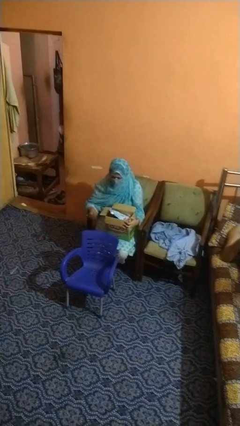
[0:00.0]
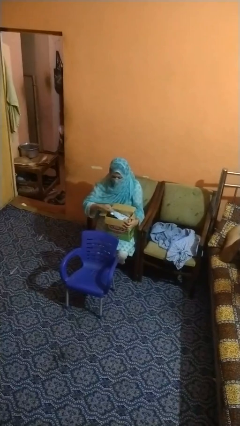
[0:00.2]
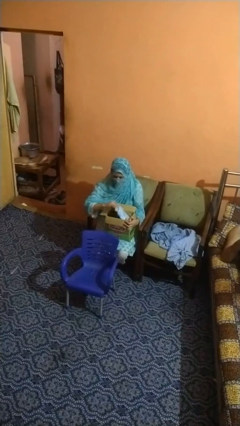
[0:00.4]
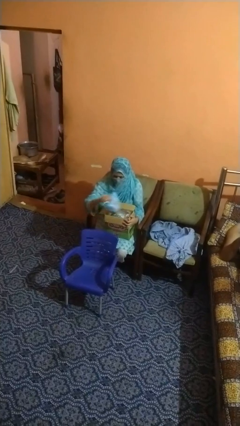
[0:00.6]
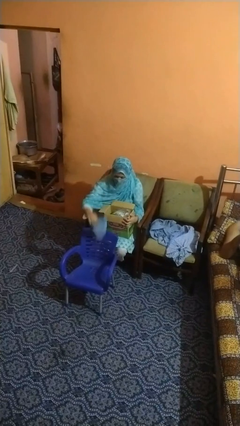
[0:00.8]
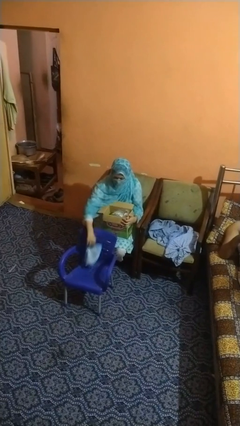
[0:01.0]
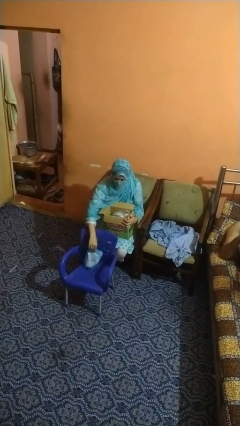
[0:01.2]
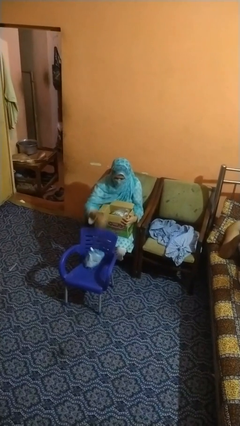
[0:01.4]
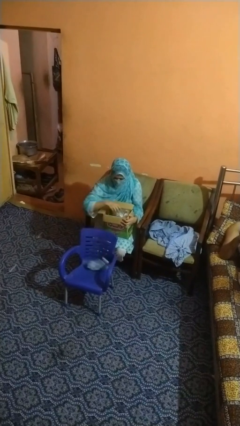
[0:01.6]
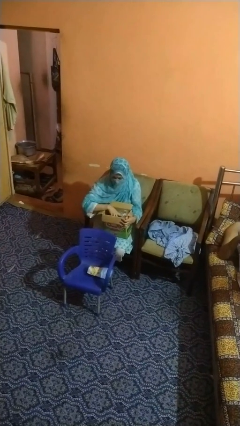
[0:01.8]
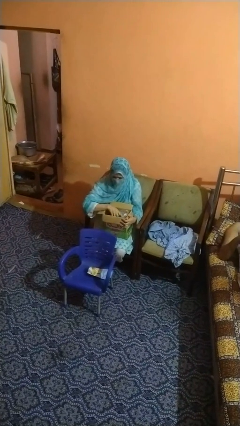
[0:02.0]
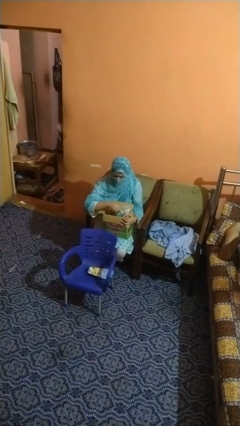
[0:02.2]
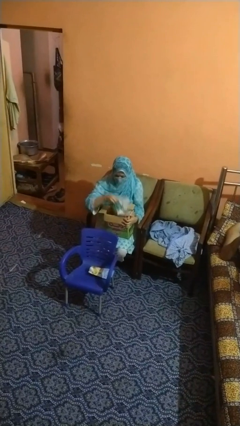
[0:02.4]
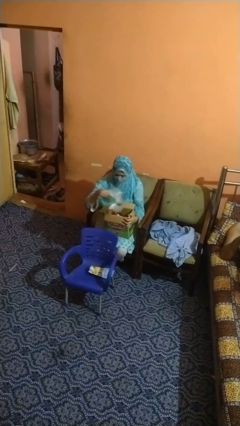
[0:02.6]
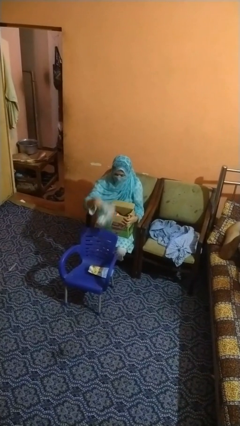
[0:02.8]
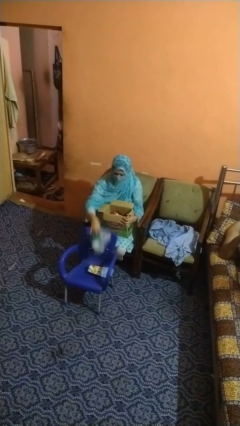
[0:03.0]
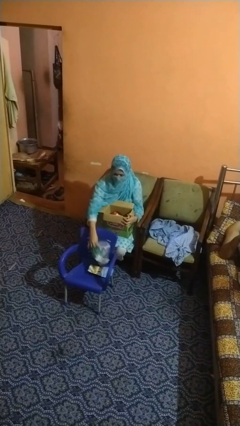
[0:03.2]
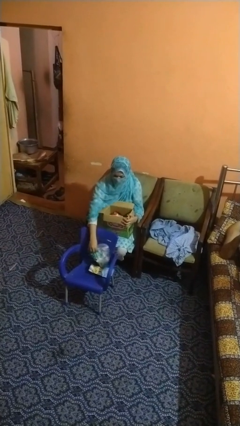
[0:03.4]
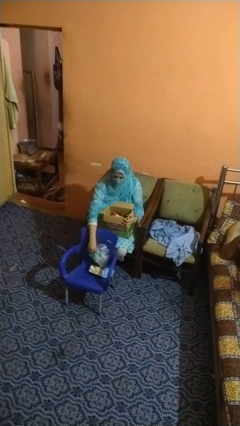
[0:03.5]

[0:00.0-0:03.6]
person takes object from box

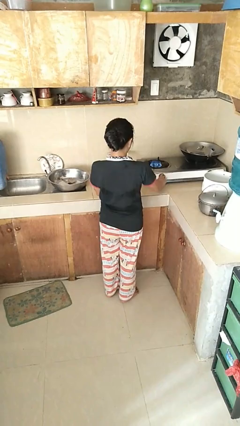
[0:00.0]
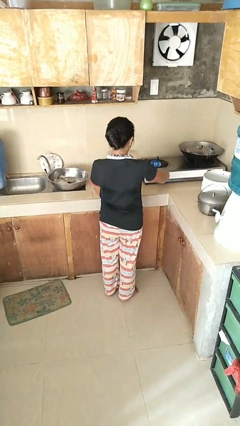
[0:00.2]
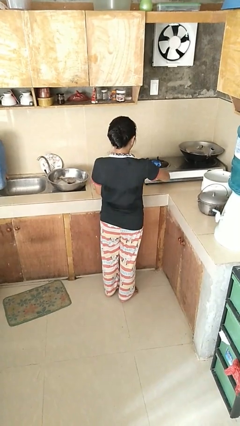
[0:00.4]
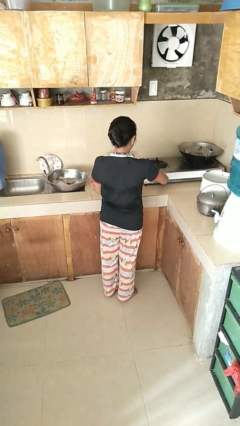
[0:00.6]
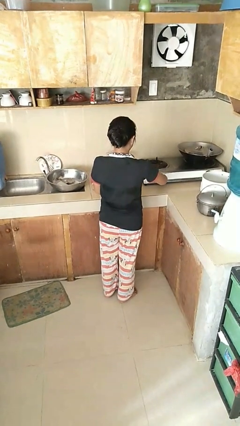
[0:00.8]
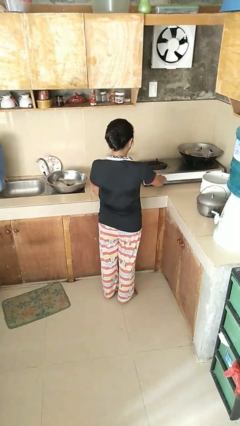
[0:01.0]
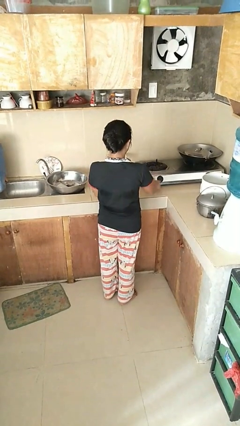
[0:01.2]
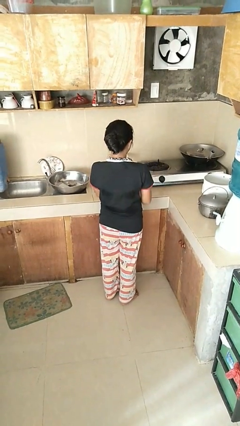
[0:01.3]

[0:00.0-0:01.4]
person turns off stovetop

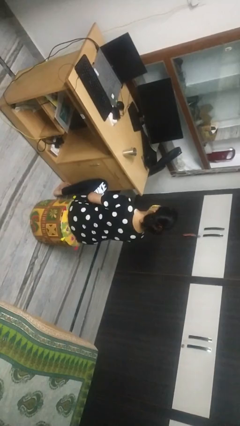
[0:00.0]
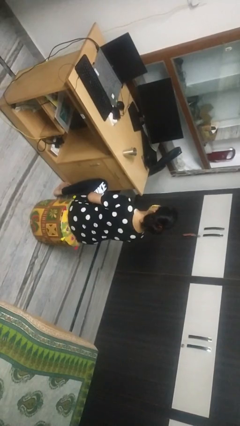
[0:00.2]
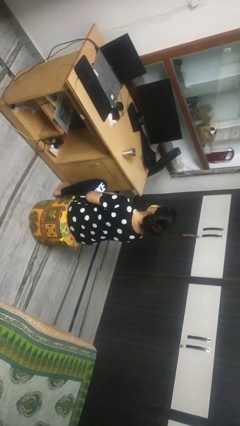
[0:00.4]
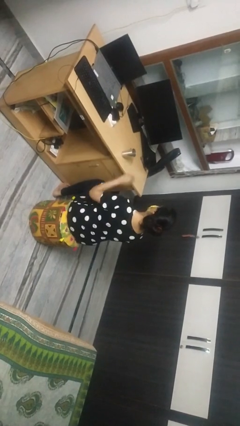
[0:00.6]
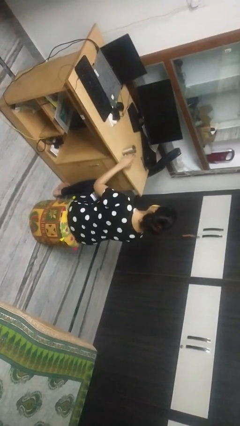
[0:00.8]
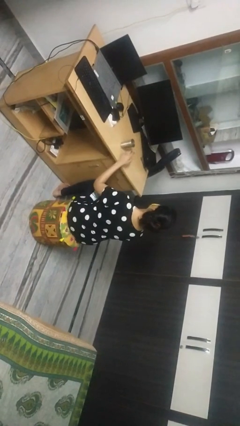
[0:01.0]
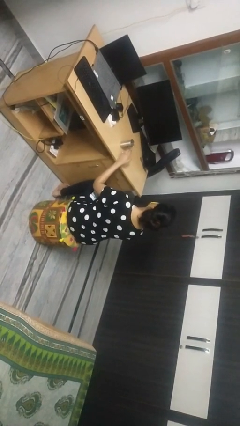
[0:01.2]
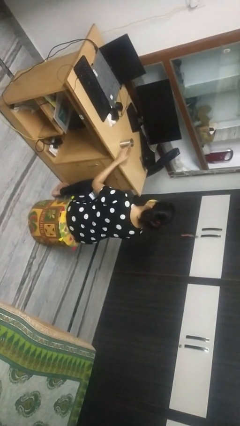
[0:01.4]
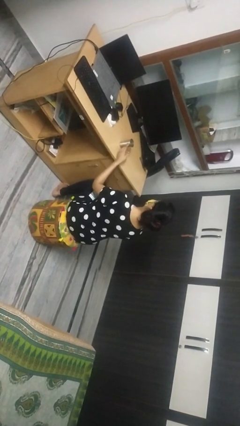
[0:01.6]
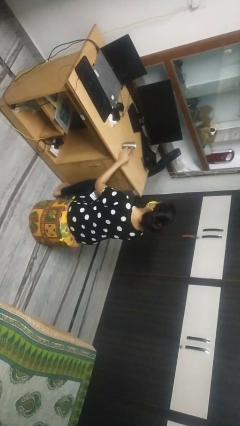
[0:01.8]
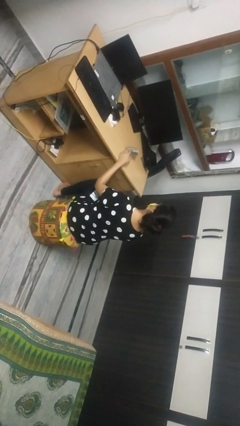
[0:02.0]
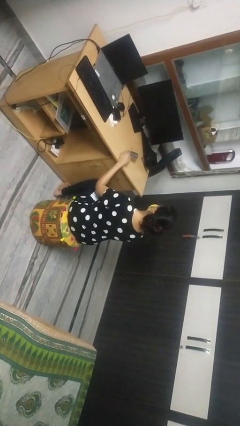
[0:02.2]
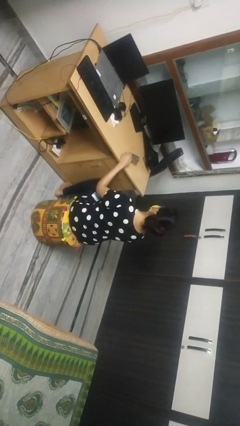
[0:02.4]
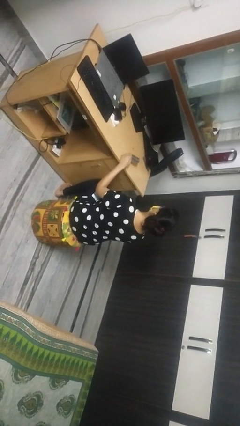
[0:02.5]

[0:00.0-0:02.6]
person knocks over glass

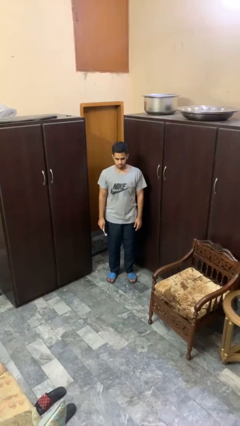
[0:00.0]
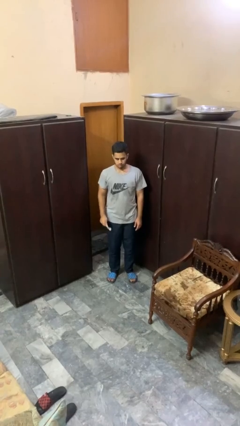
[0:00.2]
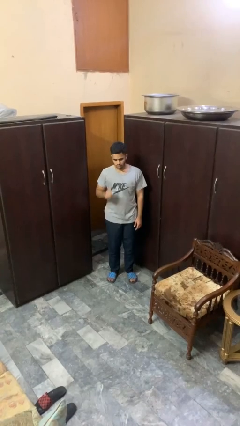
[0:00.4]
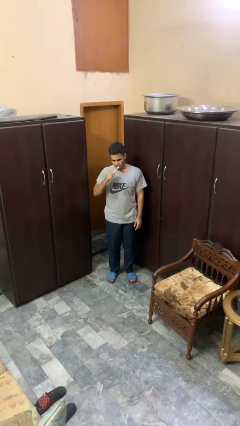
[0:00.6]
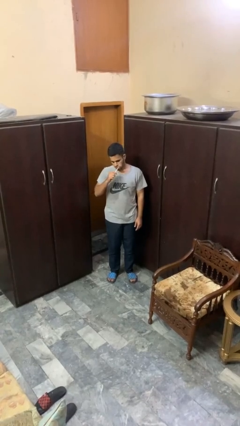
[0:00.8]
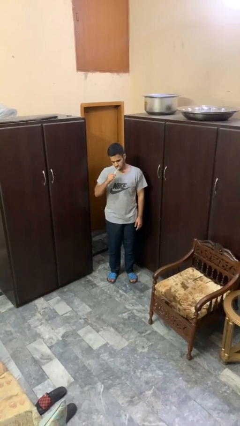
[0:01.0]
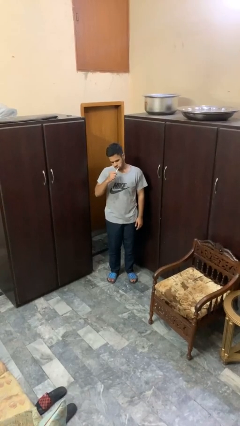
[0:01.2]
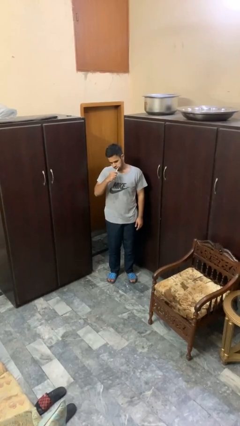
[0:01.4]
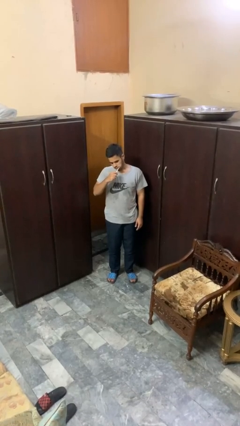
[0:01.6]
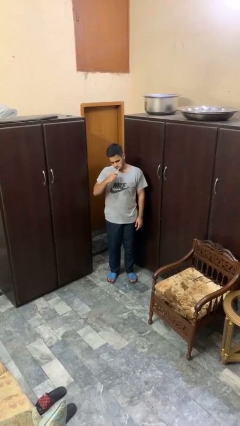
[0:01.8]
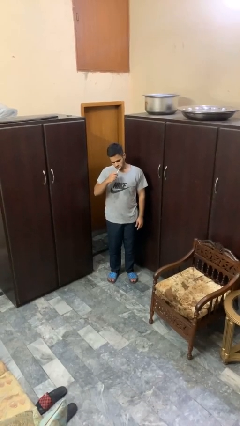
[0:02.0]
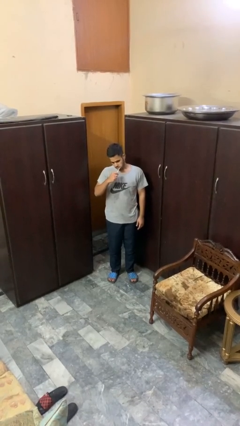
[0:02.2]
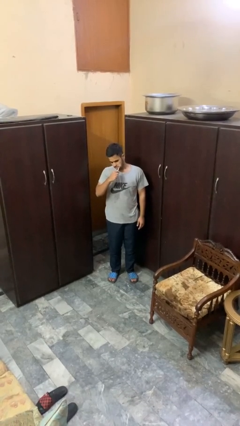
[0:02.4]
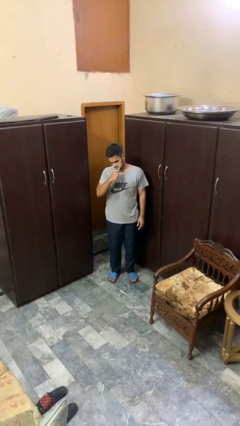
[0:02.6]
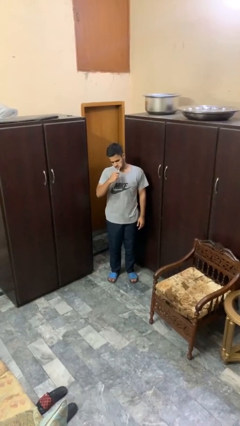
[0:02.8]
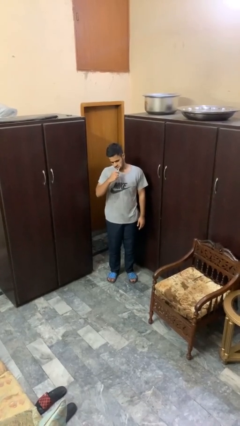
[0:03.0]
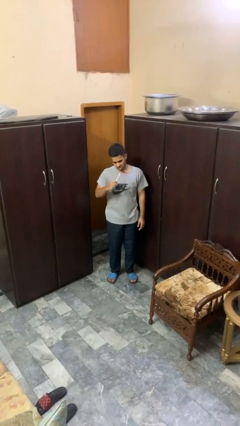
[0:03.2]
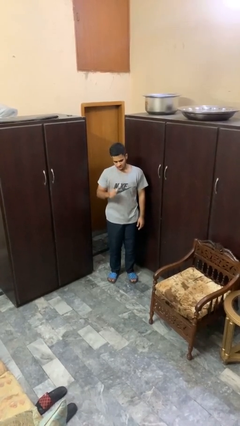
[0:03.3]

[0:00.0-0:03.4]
person brushes teeth

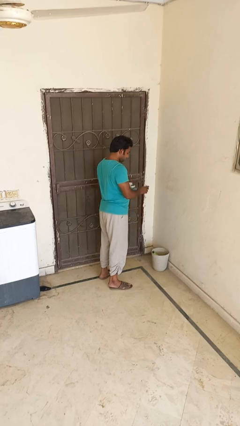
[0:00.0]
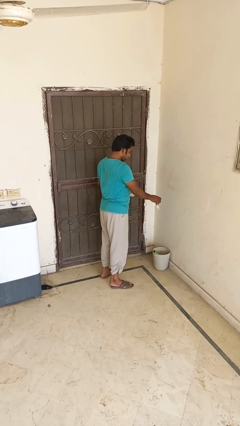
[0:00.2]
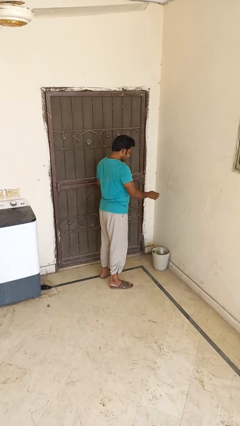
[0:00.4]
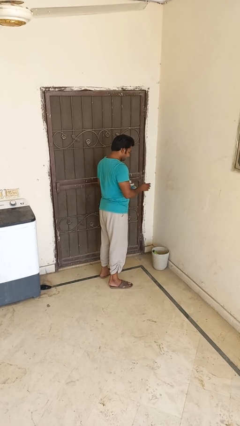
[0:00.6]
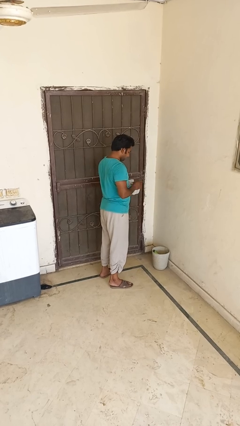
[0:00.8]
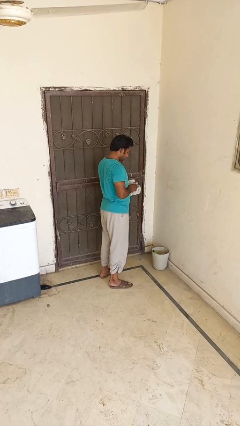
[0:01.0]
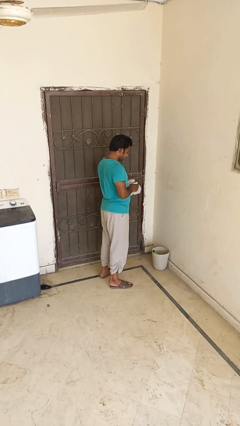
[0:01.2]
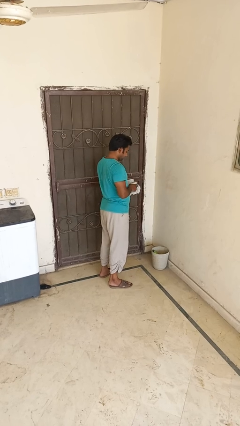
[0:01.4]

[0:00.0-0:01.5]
person discards trash

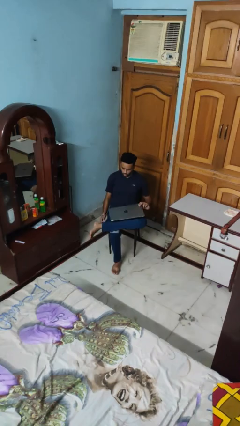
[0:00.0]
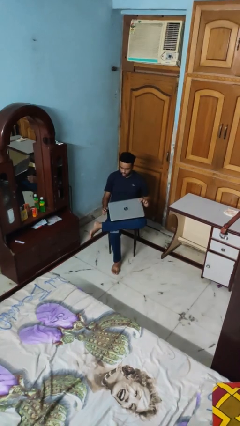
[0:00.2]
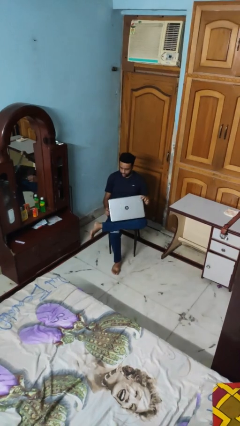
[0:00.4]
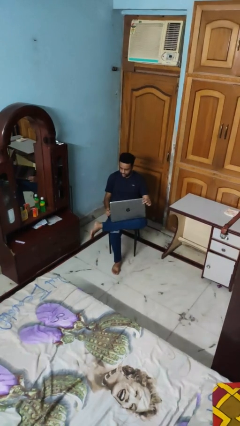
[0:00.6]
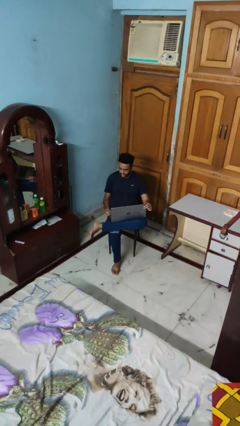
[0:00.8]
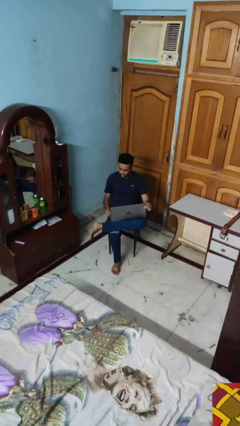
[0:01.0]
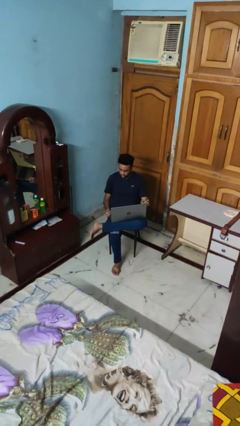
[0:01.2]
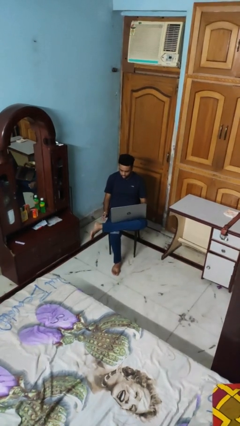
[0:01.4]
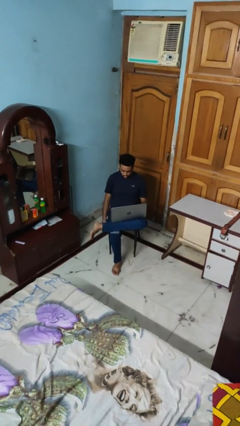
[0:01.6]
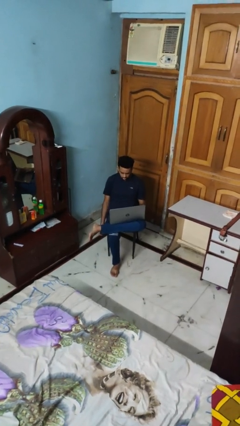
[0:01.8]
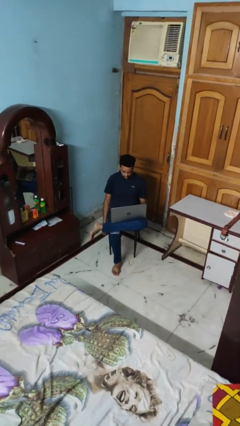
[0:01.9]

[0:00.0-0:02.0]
person opens laptop

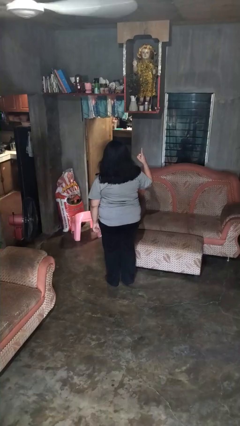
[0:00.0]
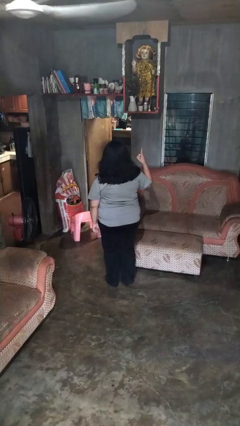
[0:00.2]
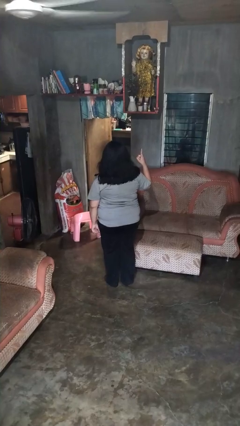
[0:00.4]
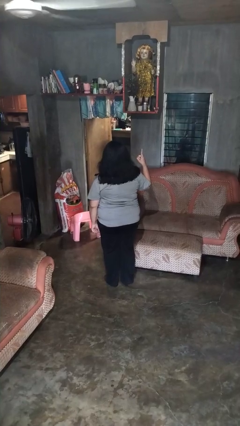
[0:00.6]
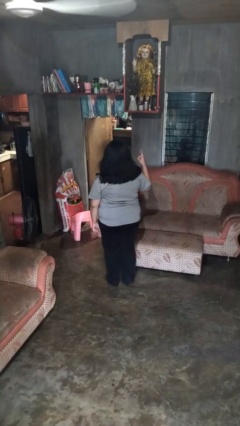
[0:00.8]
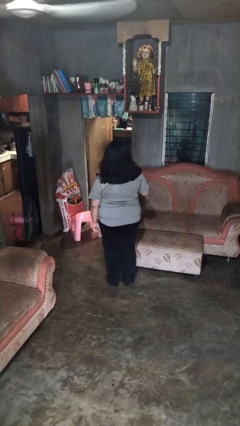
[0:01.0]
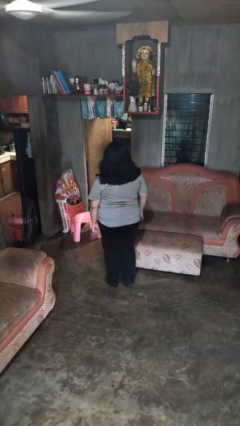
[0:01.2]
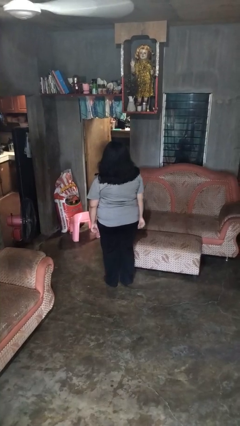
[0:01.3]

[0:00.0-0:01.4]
person gestures number one

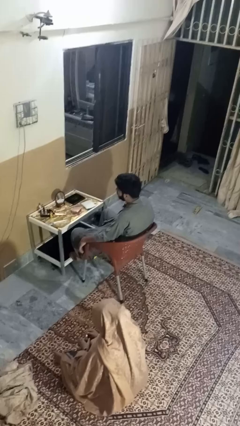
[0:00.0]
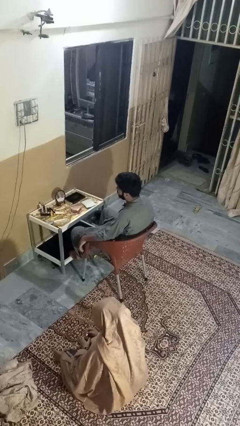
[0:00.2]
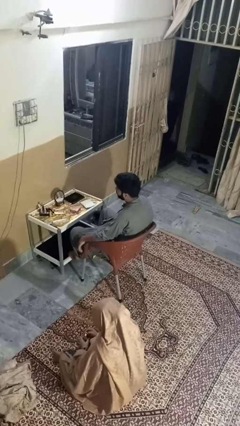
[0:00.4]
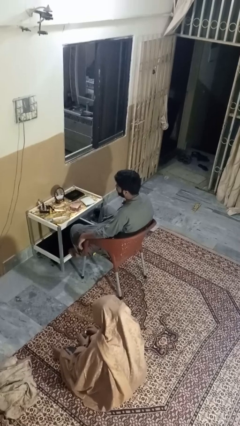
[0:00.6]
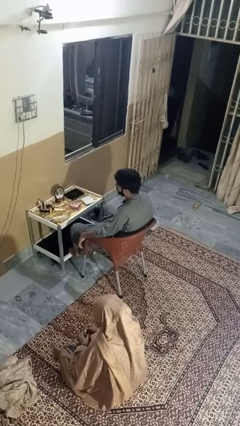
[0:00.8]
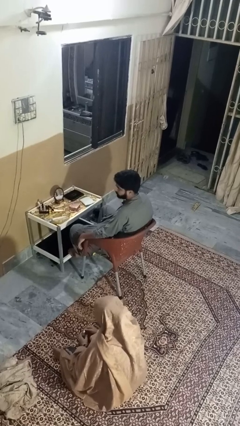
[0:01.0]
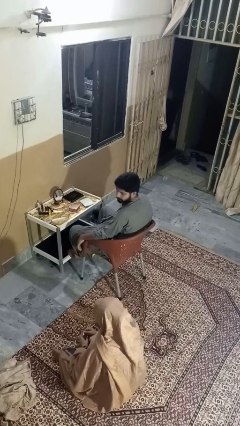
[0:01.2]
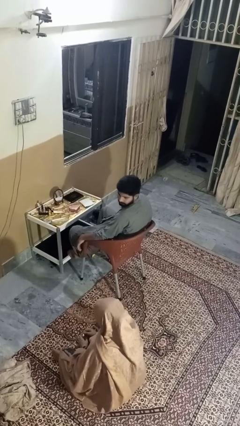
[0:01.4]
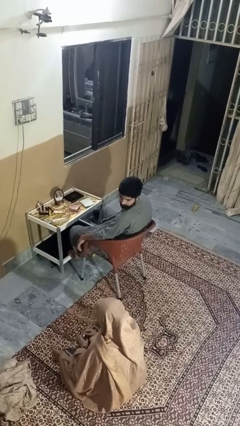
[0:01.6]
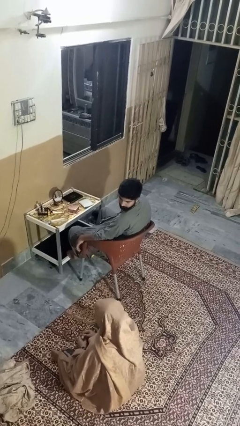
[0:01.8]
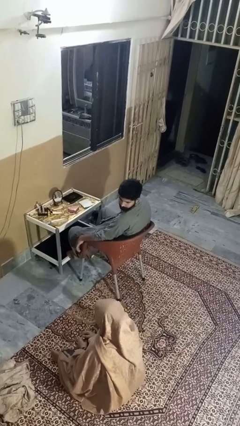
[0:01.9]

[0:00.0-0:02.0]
person looks over shoulder
